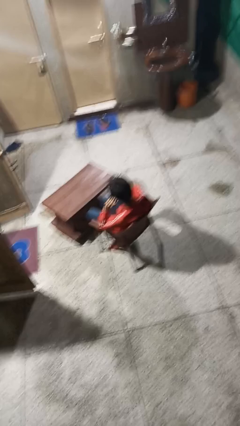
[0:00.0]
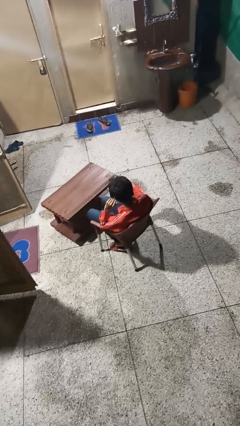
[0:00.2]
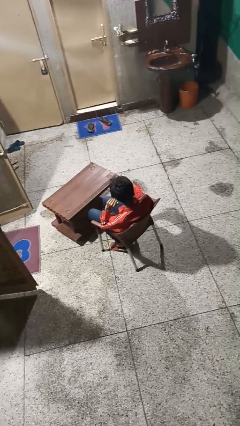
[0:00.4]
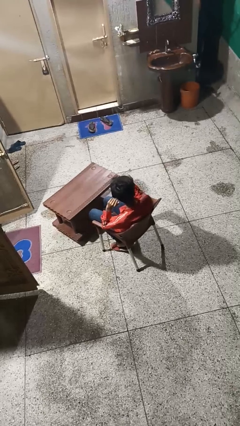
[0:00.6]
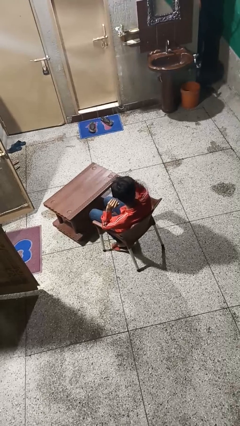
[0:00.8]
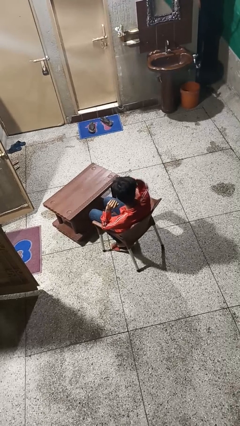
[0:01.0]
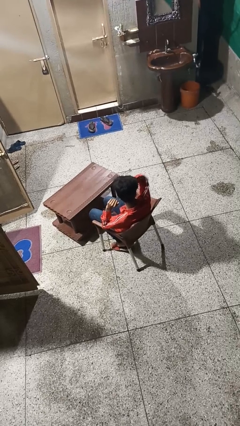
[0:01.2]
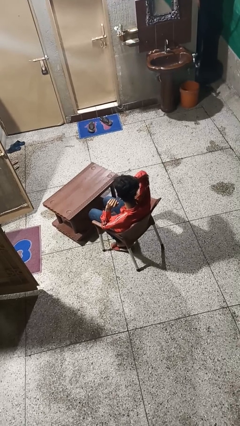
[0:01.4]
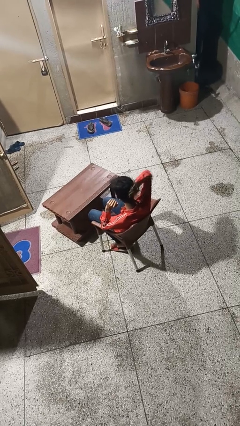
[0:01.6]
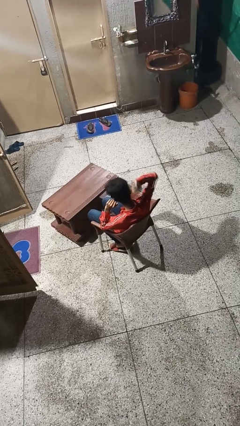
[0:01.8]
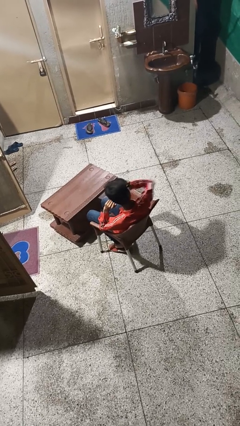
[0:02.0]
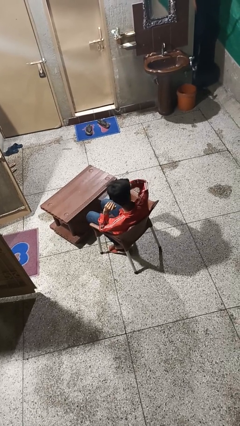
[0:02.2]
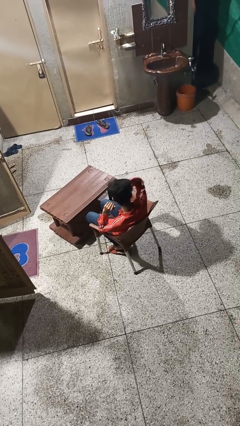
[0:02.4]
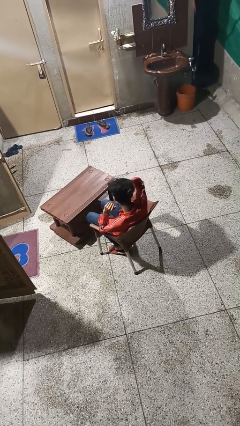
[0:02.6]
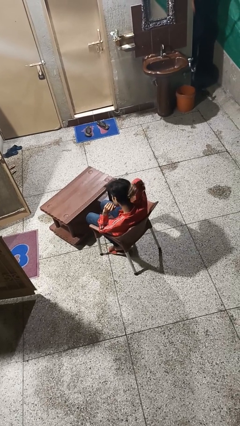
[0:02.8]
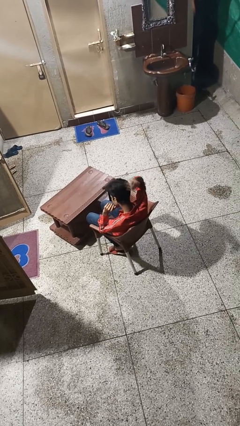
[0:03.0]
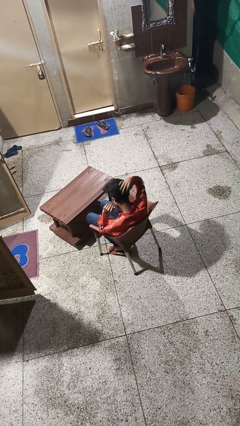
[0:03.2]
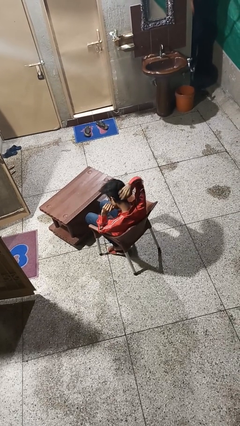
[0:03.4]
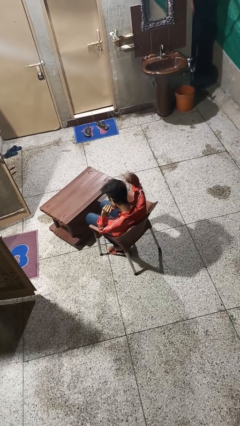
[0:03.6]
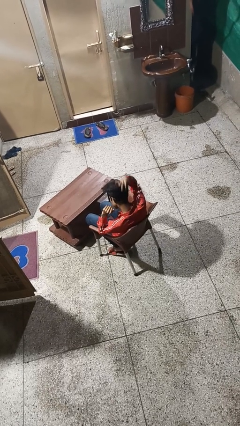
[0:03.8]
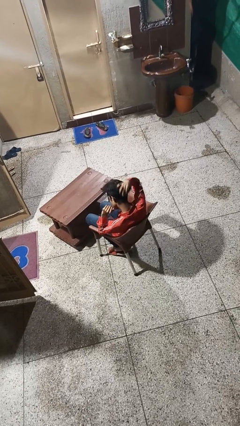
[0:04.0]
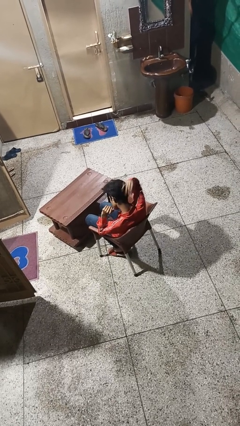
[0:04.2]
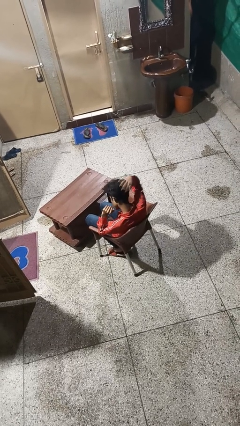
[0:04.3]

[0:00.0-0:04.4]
person strokes hair

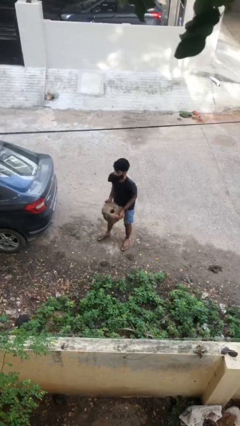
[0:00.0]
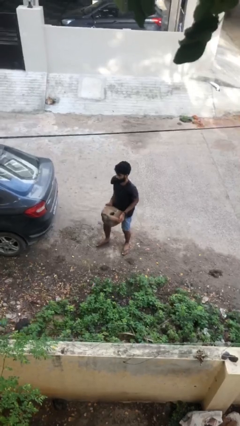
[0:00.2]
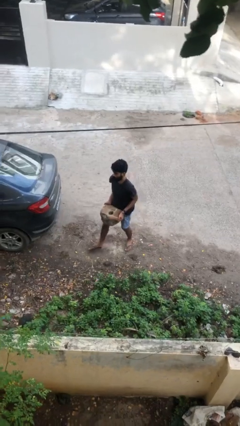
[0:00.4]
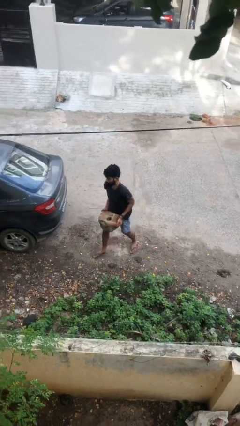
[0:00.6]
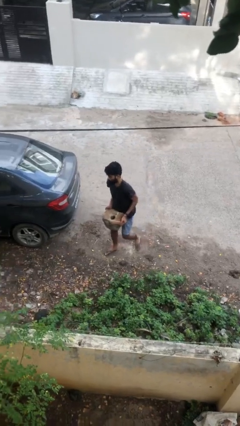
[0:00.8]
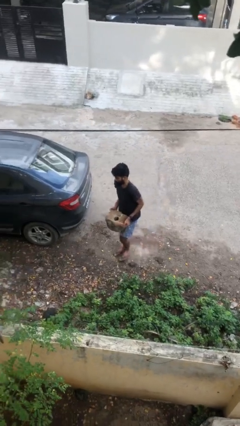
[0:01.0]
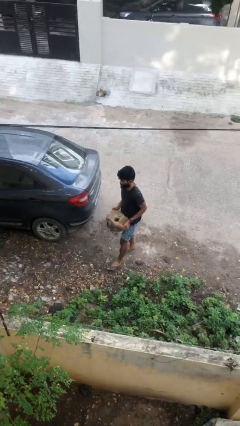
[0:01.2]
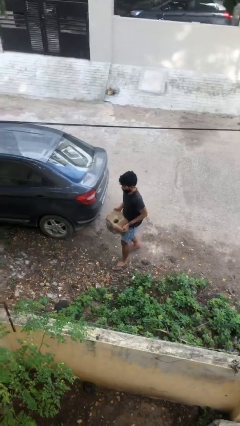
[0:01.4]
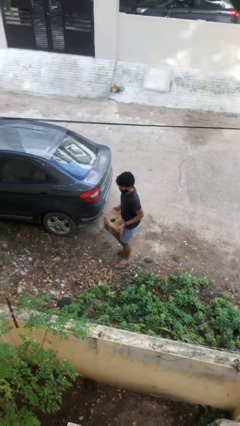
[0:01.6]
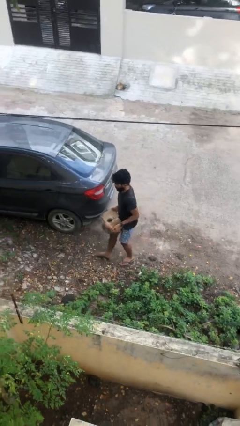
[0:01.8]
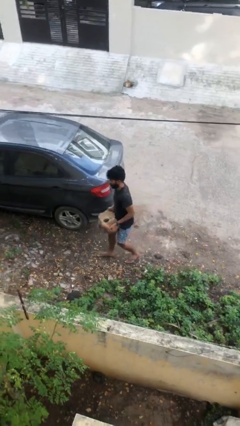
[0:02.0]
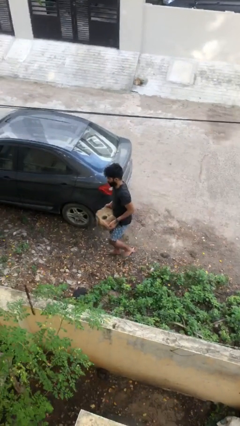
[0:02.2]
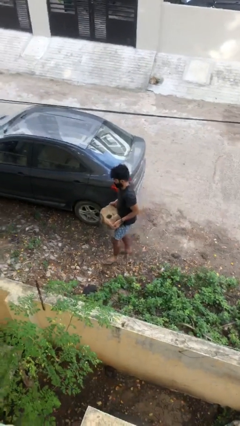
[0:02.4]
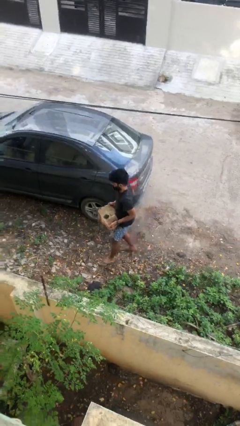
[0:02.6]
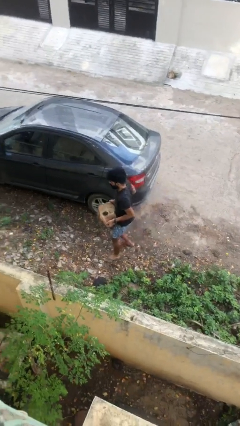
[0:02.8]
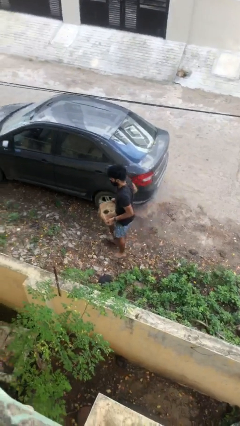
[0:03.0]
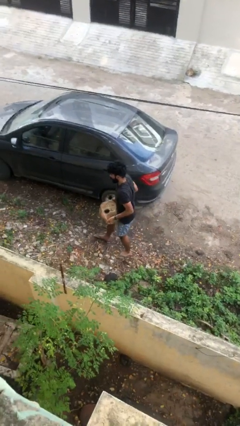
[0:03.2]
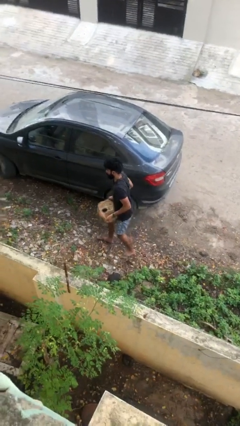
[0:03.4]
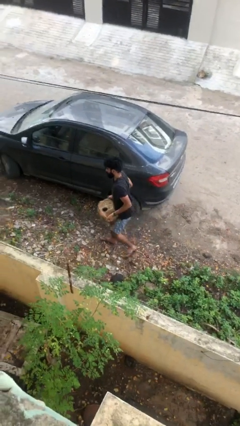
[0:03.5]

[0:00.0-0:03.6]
person carries heavy object

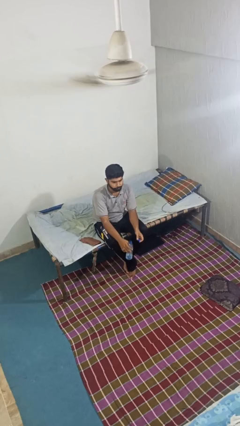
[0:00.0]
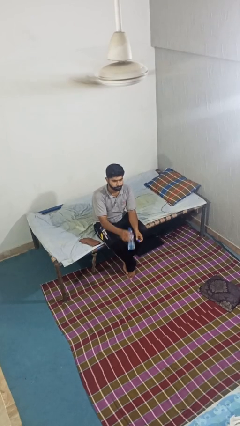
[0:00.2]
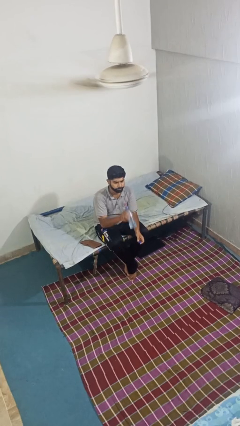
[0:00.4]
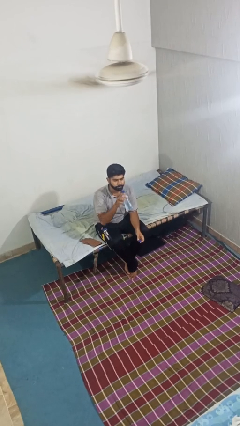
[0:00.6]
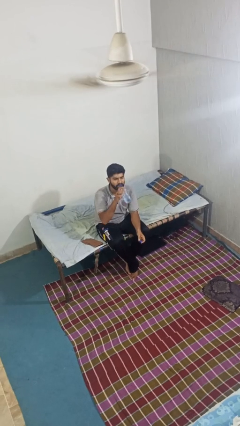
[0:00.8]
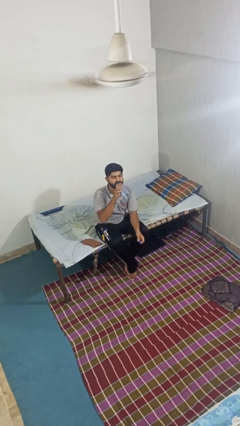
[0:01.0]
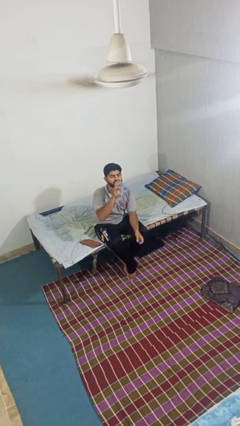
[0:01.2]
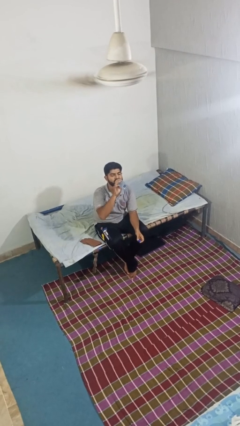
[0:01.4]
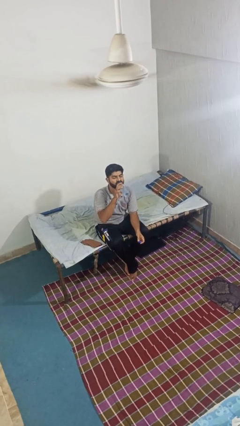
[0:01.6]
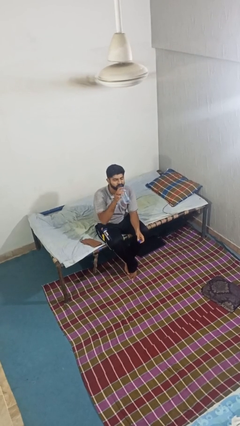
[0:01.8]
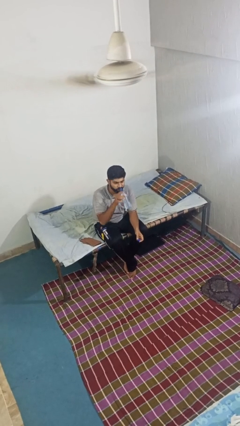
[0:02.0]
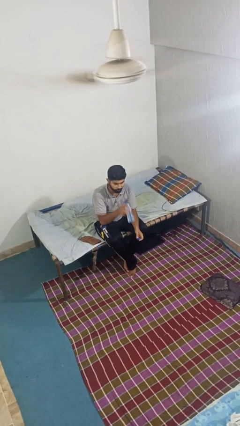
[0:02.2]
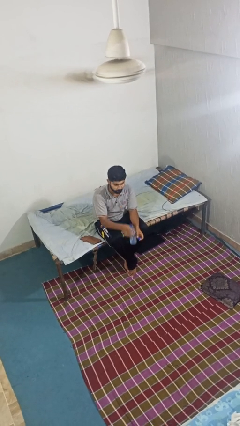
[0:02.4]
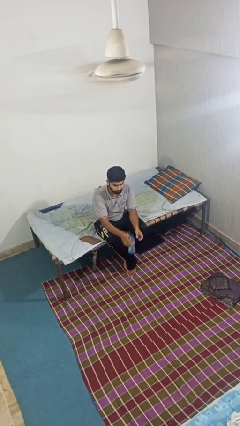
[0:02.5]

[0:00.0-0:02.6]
person drinks from bottle

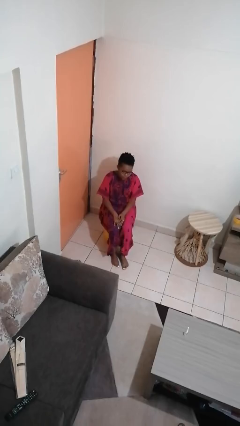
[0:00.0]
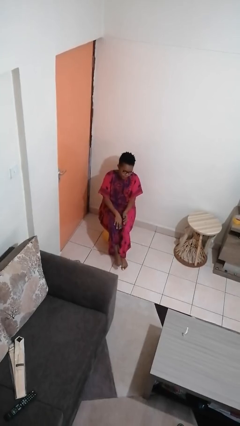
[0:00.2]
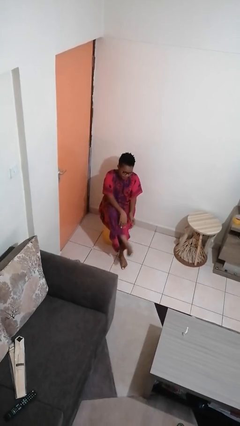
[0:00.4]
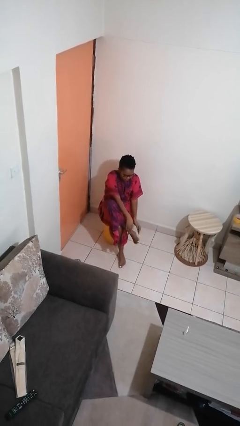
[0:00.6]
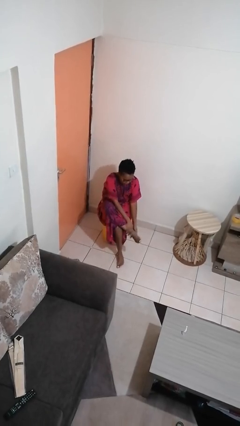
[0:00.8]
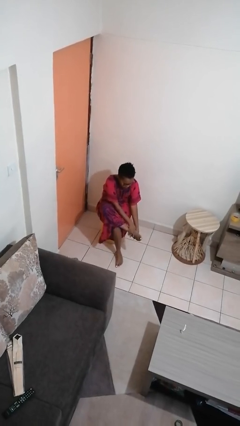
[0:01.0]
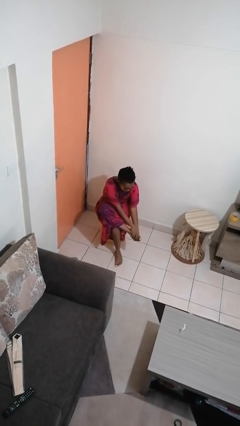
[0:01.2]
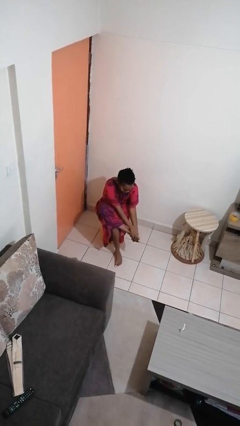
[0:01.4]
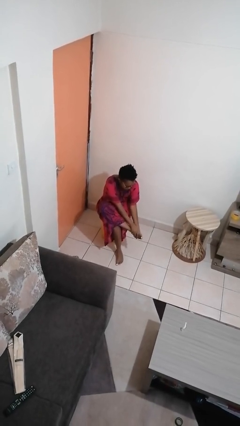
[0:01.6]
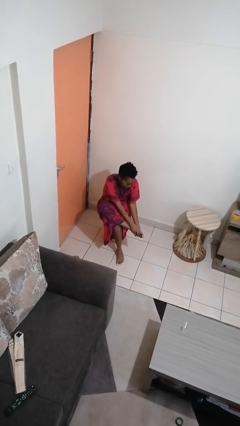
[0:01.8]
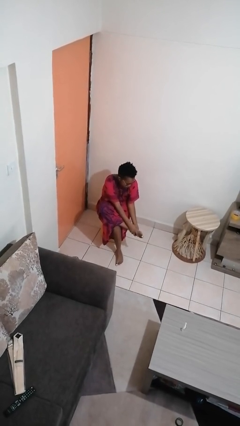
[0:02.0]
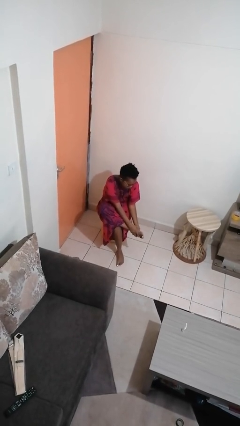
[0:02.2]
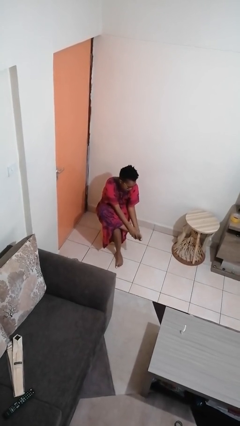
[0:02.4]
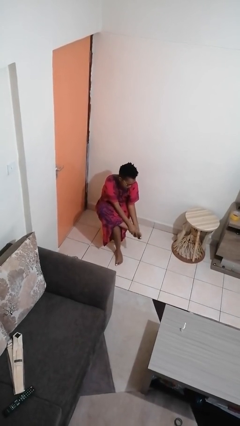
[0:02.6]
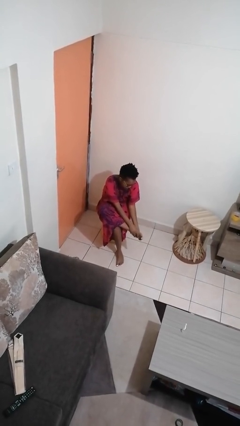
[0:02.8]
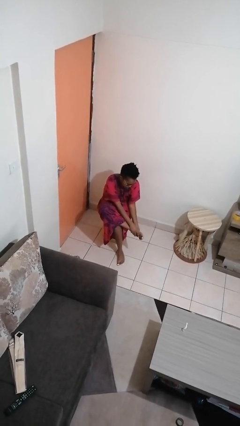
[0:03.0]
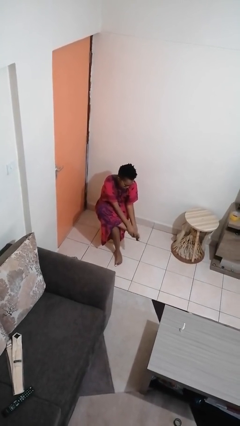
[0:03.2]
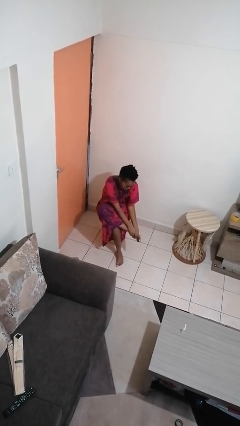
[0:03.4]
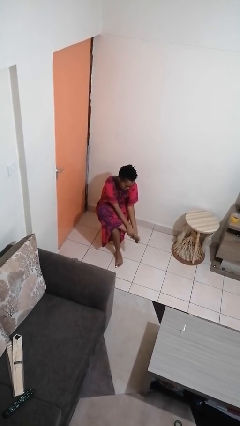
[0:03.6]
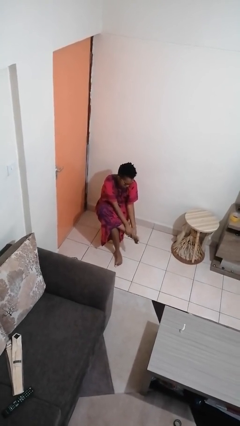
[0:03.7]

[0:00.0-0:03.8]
person rubs foot

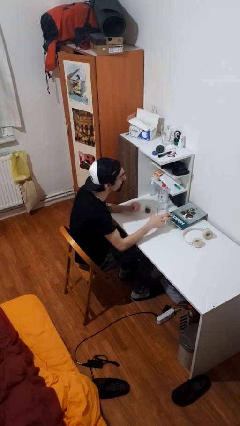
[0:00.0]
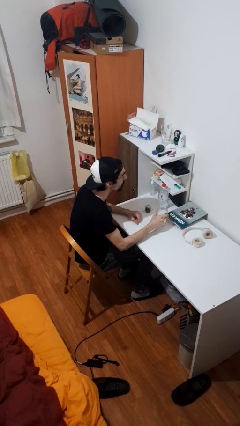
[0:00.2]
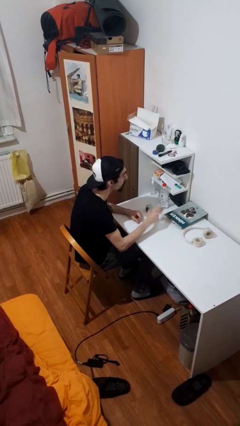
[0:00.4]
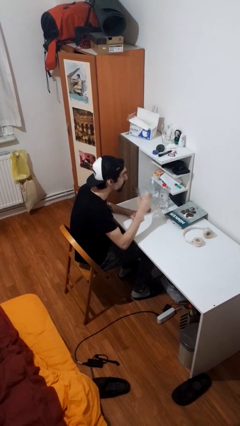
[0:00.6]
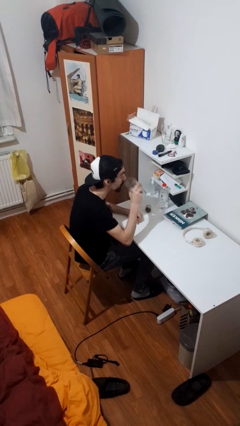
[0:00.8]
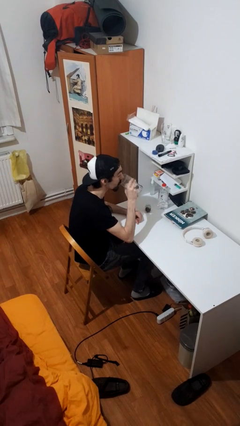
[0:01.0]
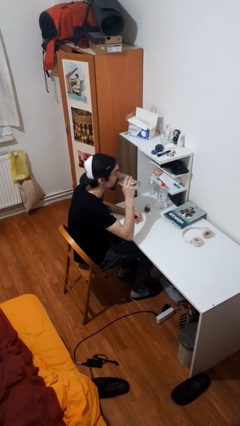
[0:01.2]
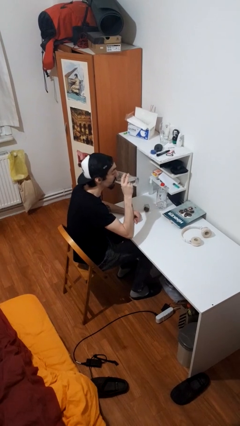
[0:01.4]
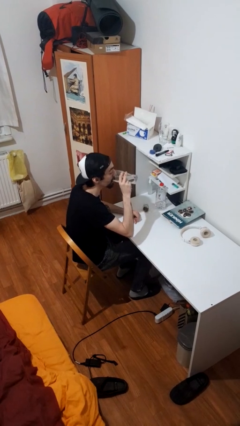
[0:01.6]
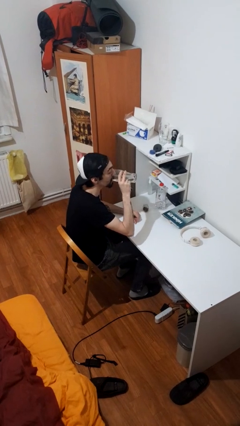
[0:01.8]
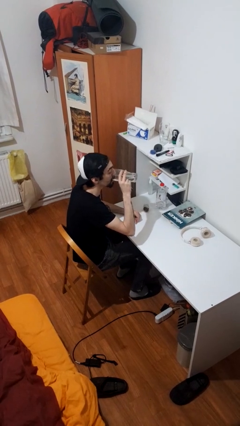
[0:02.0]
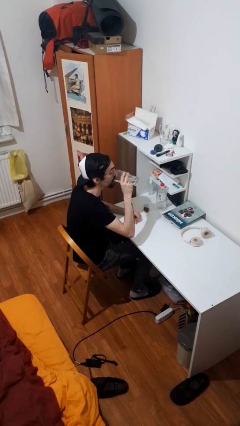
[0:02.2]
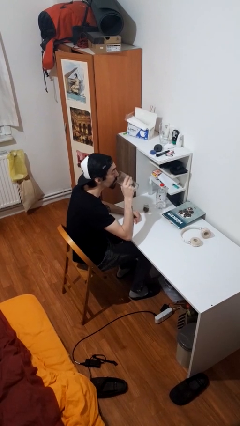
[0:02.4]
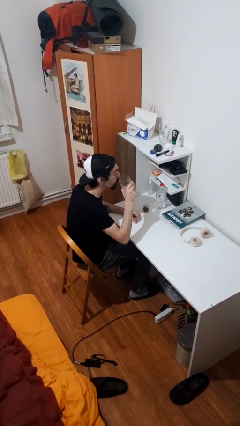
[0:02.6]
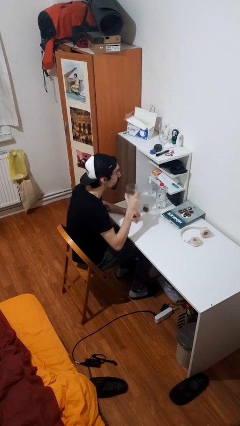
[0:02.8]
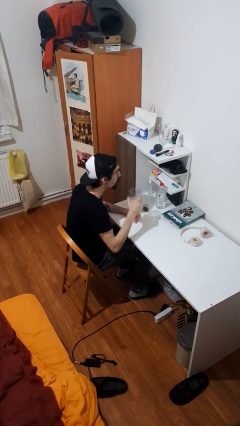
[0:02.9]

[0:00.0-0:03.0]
person drinks from cup

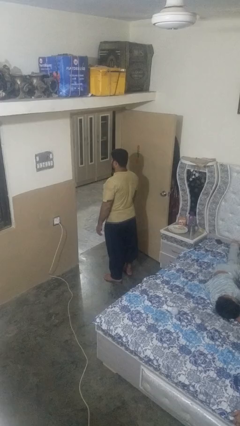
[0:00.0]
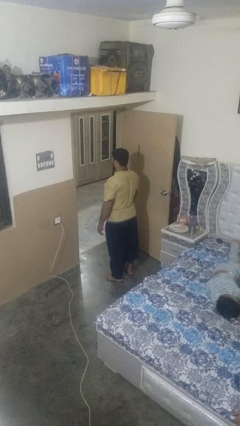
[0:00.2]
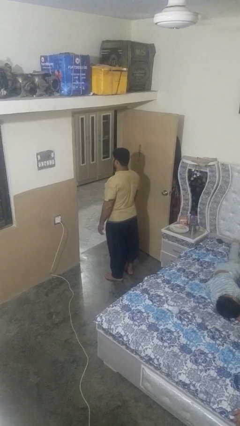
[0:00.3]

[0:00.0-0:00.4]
person bumps into wall
